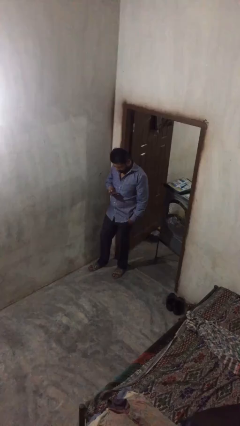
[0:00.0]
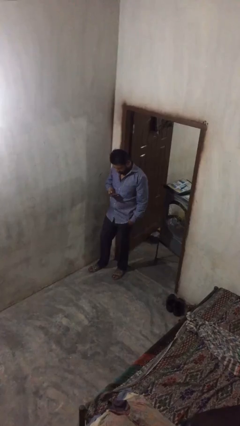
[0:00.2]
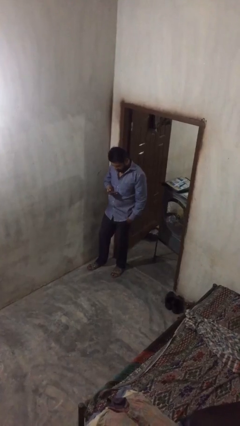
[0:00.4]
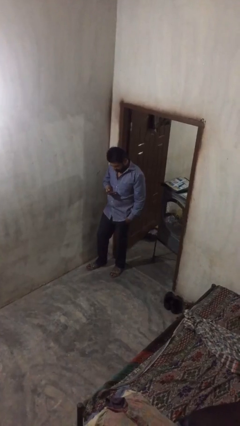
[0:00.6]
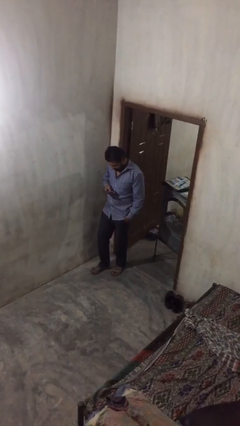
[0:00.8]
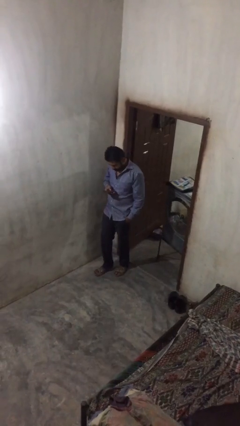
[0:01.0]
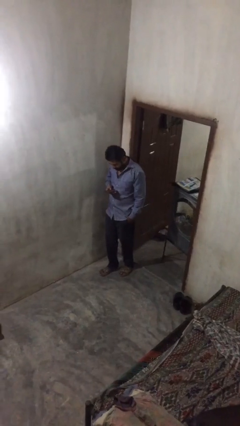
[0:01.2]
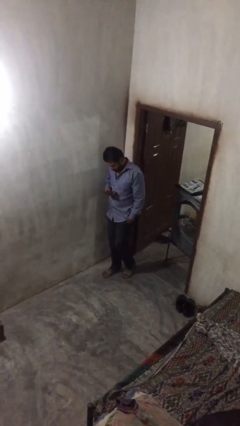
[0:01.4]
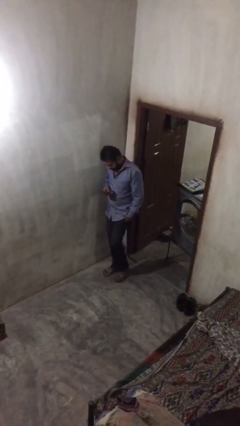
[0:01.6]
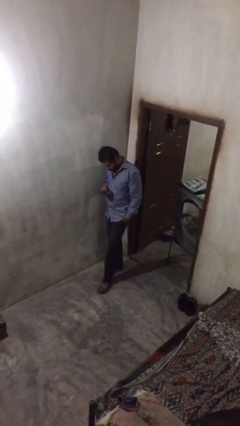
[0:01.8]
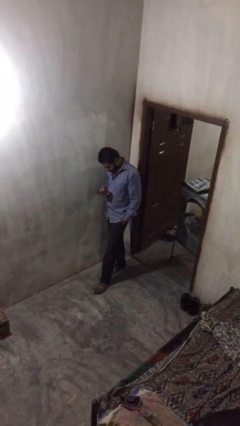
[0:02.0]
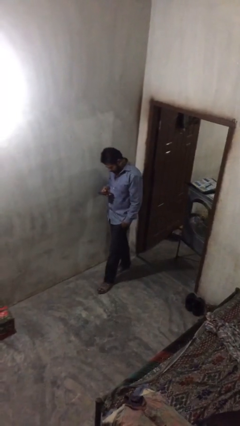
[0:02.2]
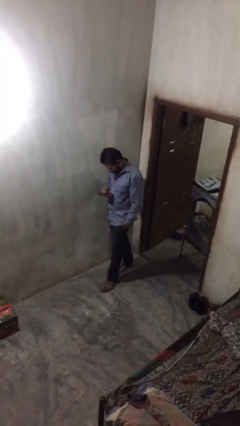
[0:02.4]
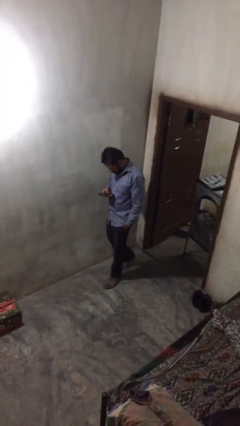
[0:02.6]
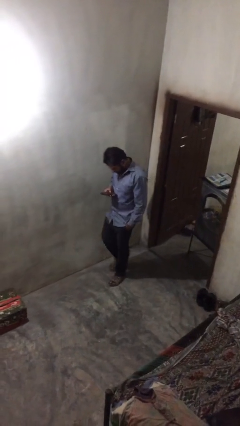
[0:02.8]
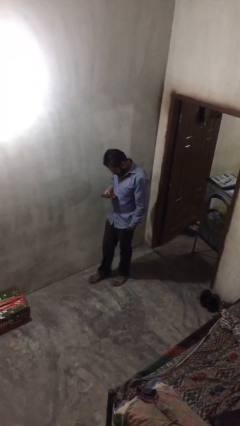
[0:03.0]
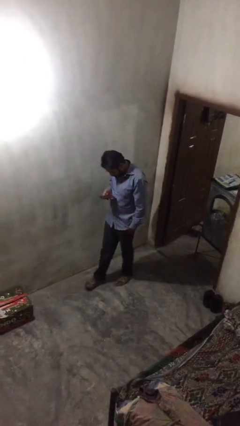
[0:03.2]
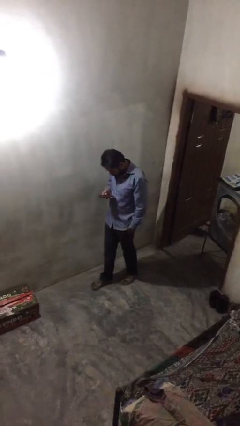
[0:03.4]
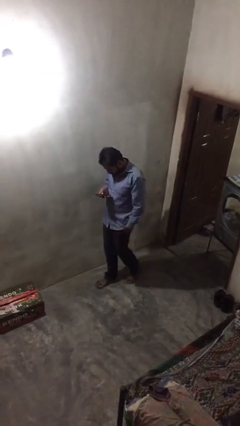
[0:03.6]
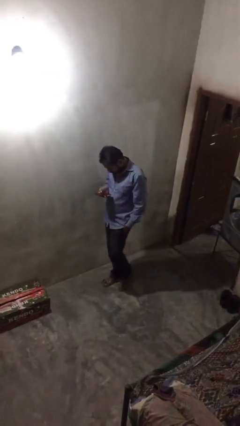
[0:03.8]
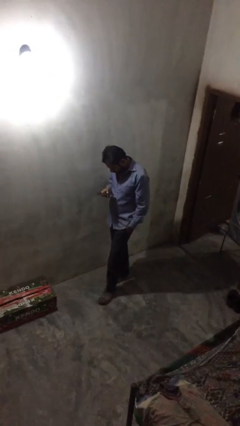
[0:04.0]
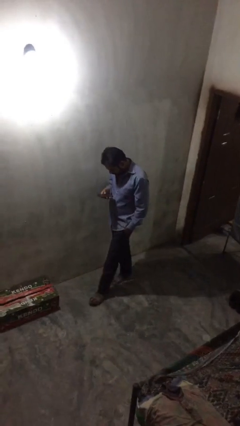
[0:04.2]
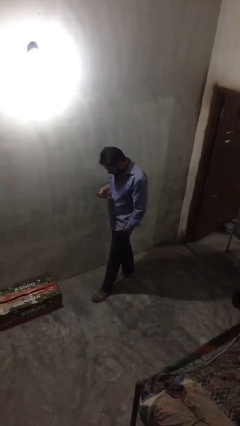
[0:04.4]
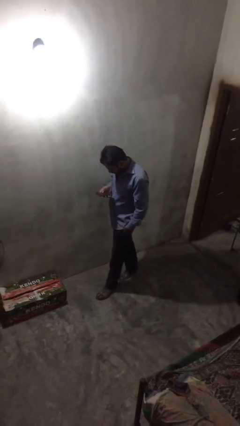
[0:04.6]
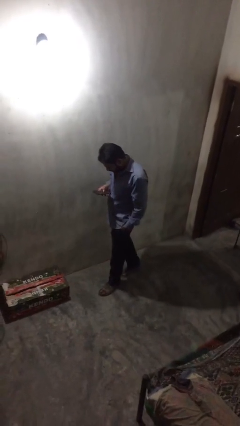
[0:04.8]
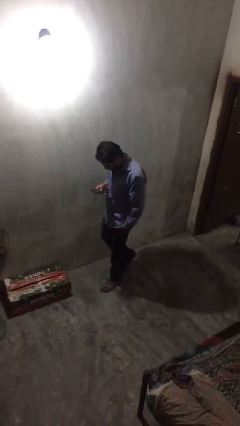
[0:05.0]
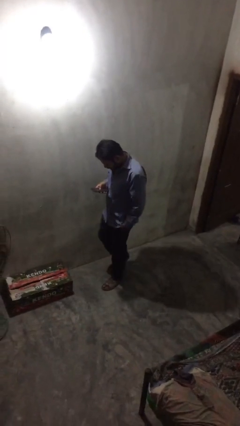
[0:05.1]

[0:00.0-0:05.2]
person texts on phone

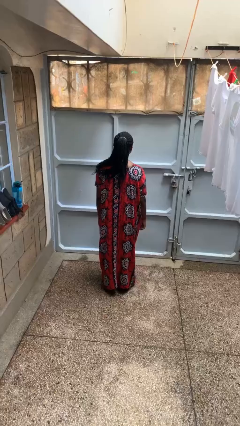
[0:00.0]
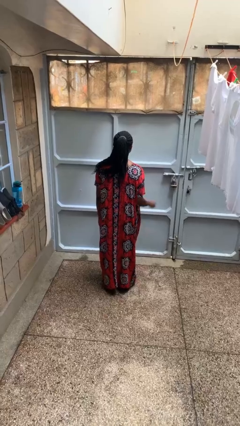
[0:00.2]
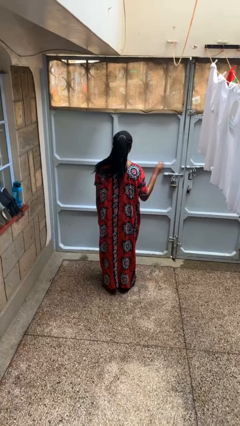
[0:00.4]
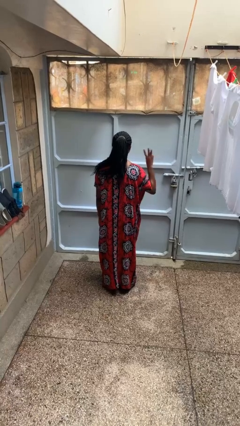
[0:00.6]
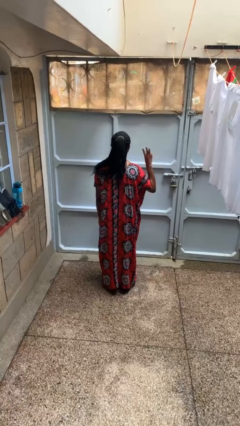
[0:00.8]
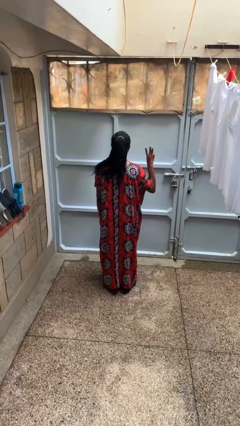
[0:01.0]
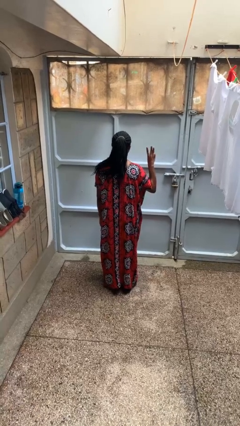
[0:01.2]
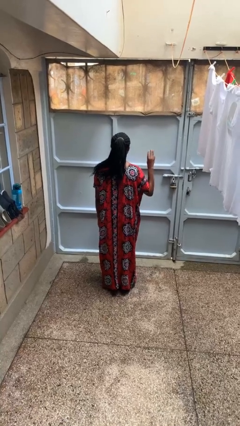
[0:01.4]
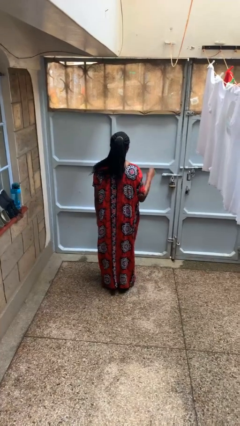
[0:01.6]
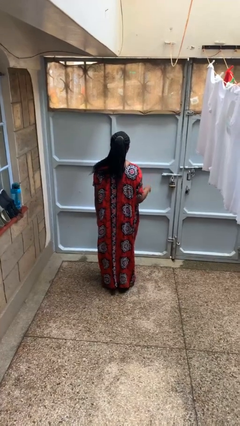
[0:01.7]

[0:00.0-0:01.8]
person gestures number three

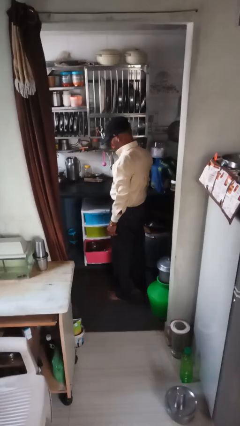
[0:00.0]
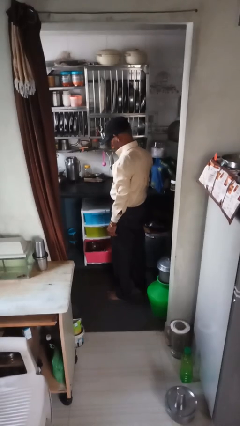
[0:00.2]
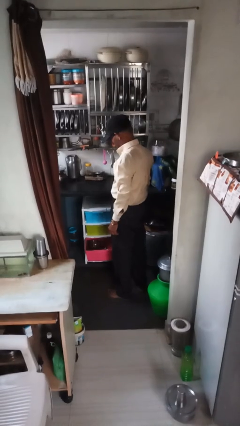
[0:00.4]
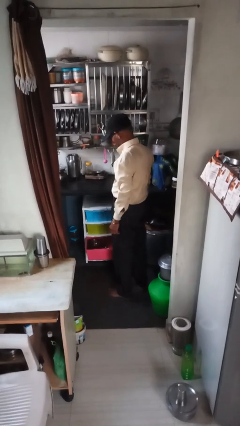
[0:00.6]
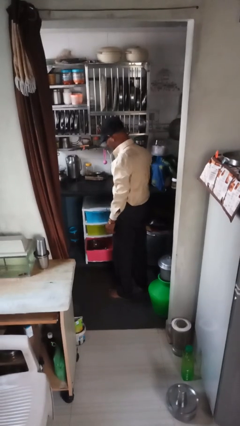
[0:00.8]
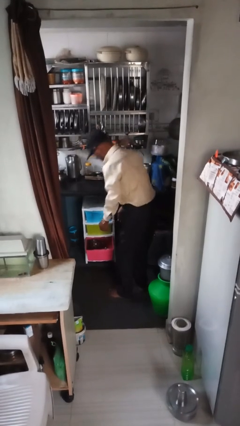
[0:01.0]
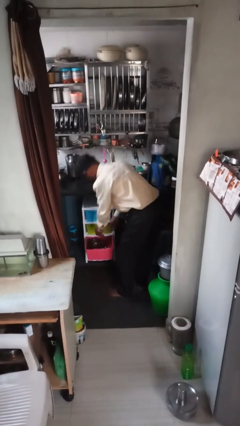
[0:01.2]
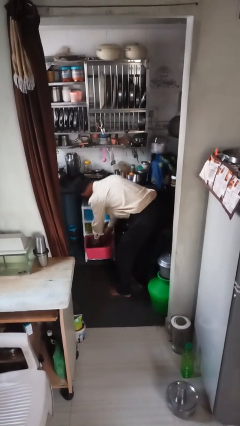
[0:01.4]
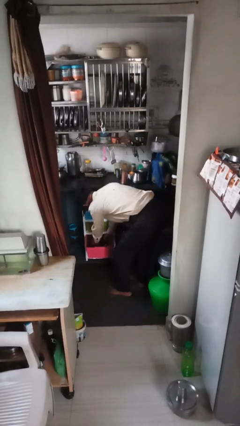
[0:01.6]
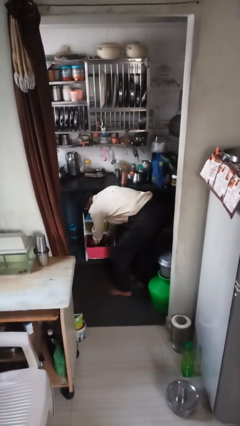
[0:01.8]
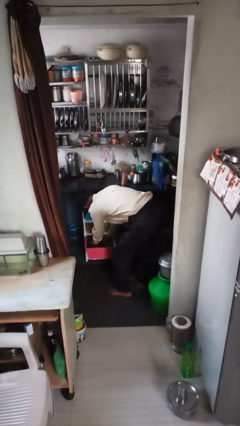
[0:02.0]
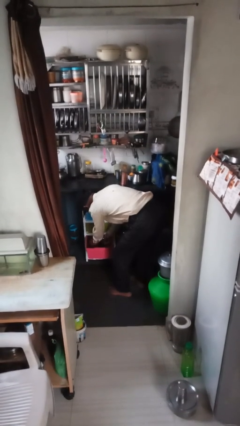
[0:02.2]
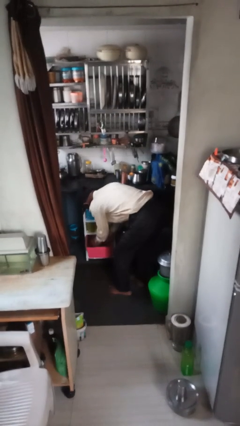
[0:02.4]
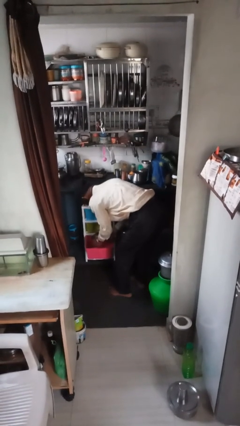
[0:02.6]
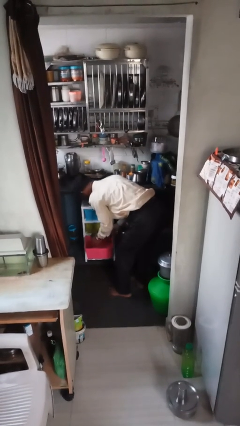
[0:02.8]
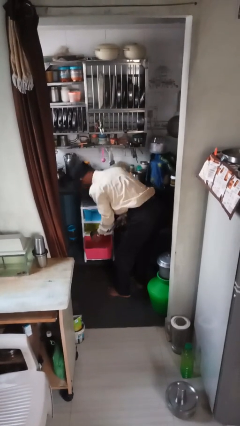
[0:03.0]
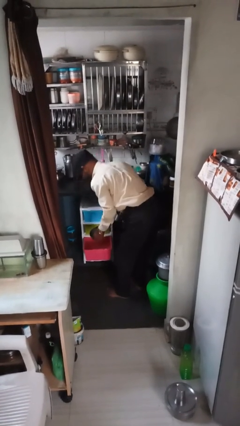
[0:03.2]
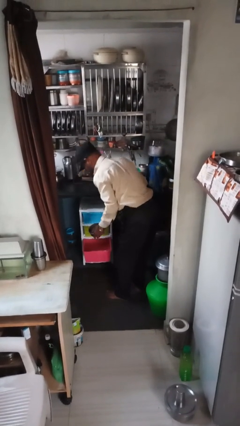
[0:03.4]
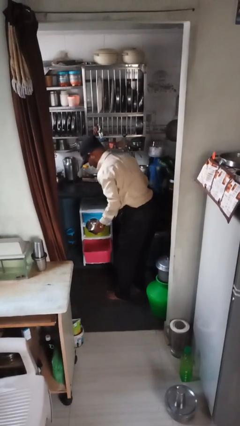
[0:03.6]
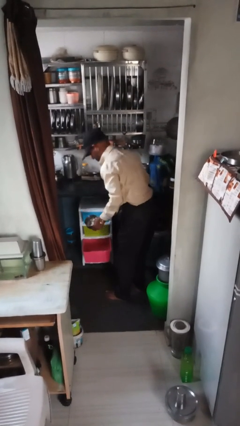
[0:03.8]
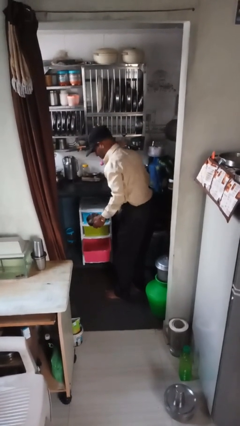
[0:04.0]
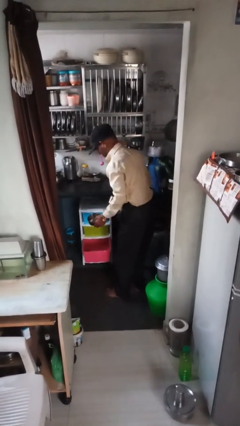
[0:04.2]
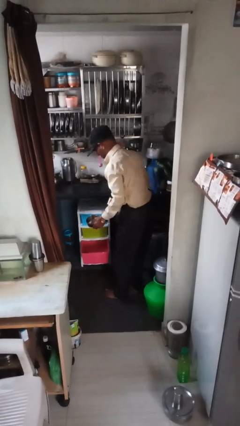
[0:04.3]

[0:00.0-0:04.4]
person takes object from kitchen drawer

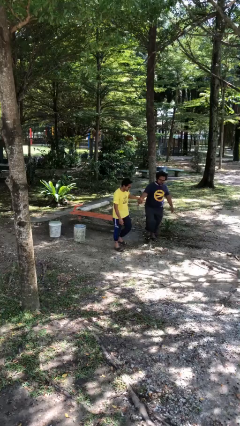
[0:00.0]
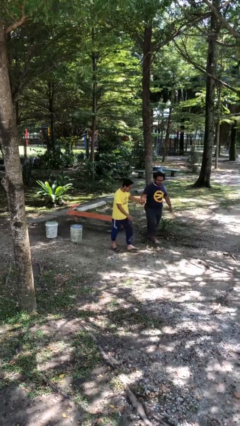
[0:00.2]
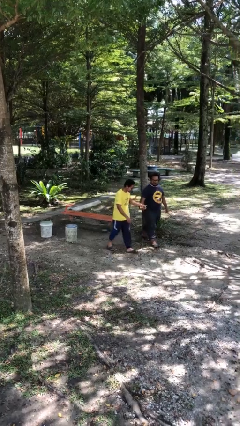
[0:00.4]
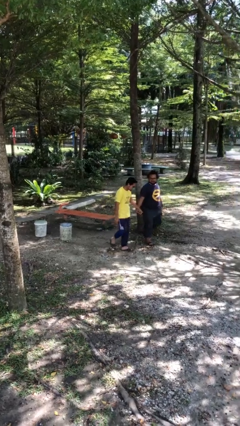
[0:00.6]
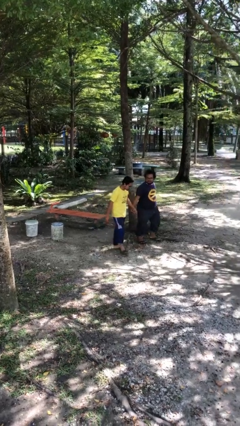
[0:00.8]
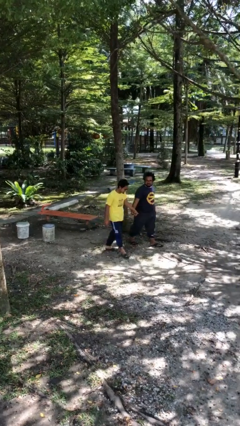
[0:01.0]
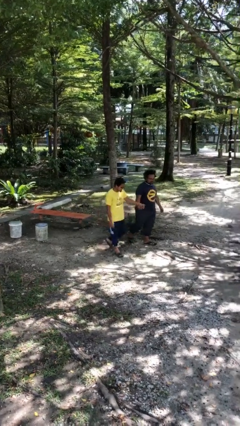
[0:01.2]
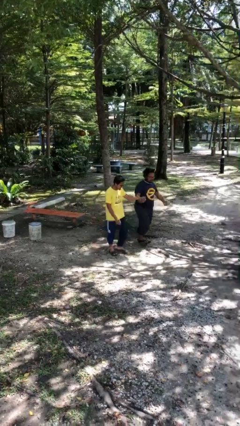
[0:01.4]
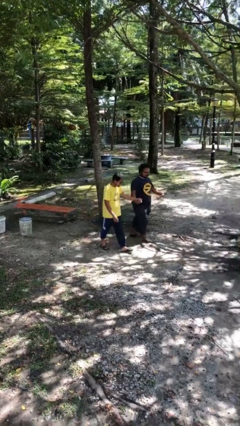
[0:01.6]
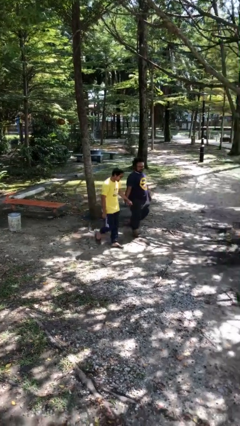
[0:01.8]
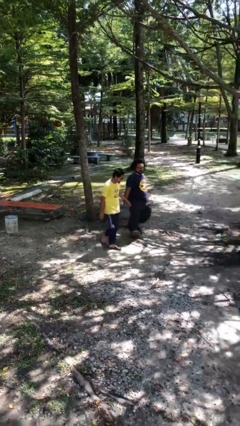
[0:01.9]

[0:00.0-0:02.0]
person holds hand

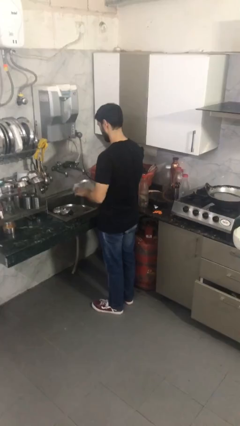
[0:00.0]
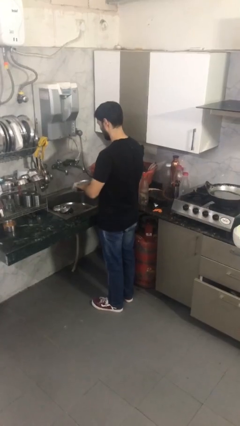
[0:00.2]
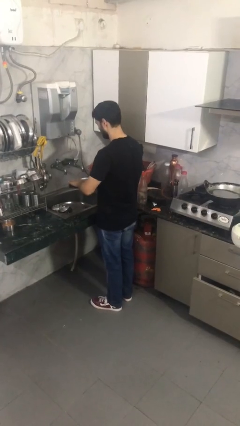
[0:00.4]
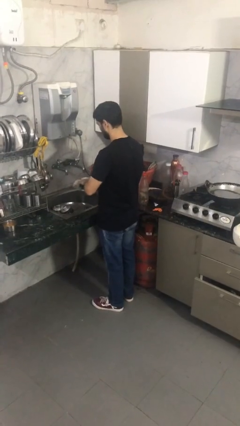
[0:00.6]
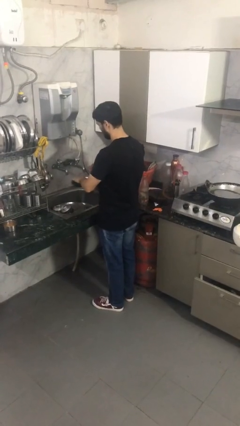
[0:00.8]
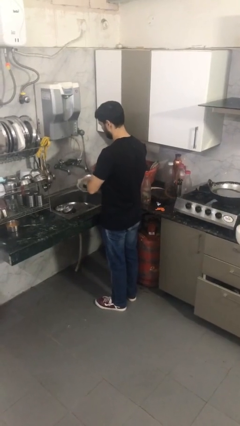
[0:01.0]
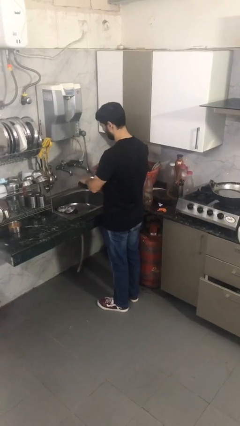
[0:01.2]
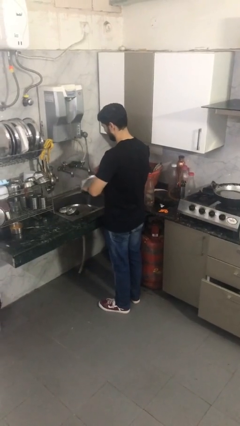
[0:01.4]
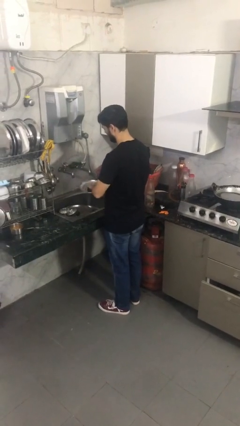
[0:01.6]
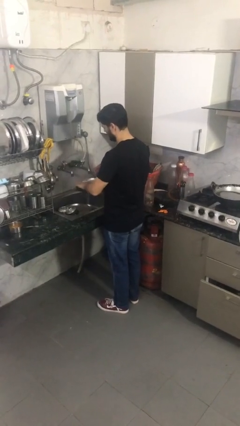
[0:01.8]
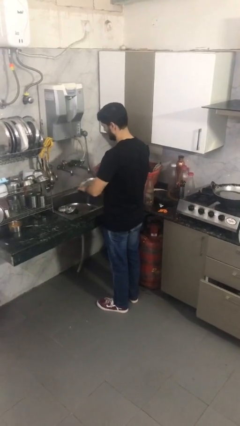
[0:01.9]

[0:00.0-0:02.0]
person washes dish

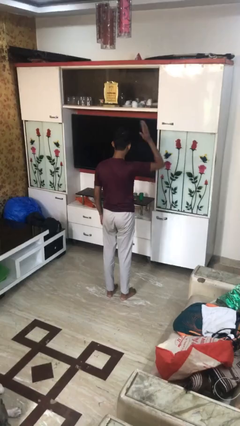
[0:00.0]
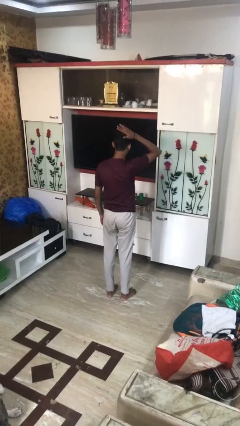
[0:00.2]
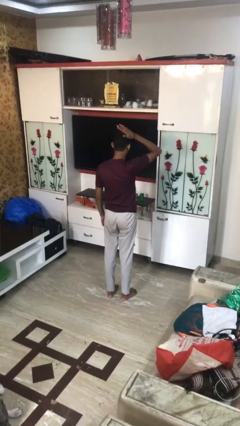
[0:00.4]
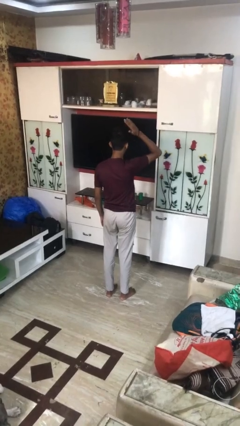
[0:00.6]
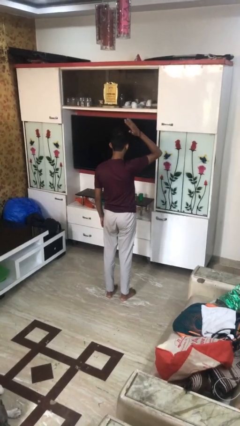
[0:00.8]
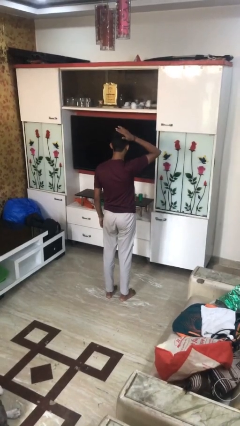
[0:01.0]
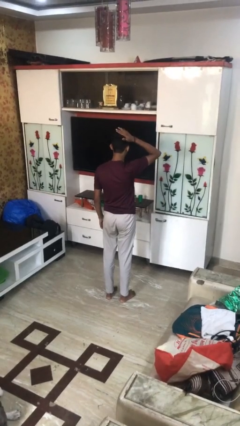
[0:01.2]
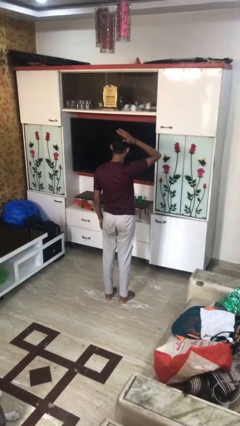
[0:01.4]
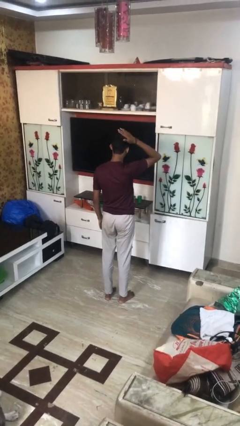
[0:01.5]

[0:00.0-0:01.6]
person pats head

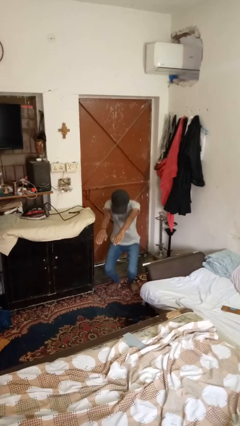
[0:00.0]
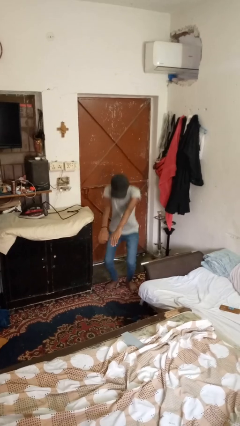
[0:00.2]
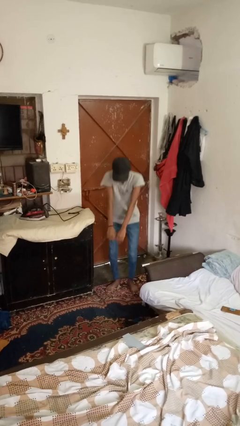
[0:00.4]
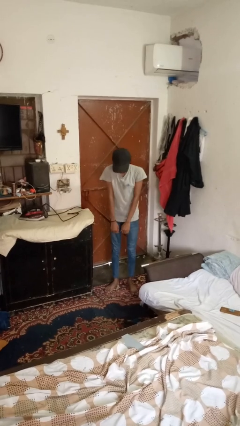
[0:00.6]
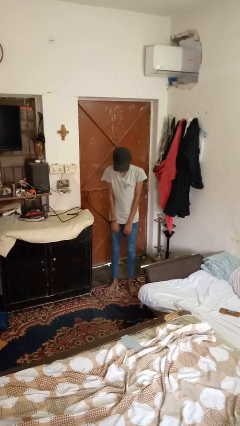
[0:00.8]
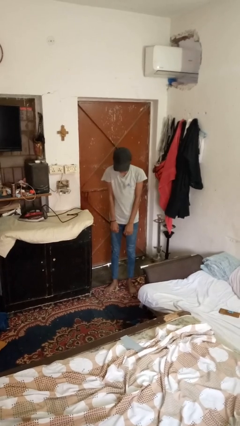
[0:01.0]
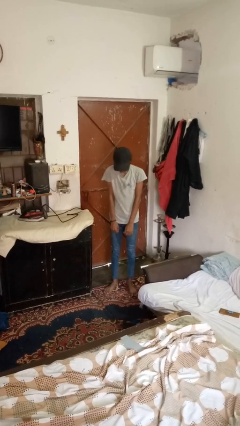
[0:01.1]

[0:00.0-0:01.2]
person stands up
